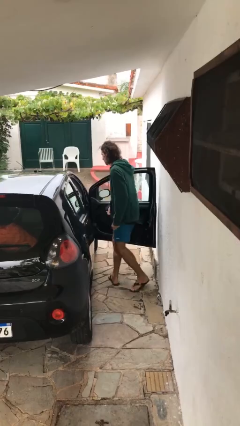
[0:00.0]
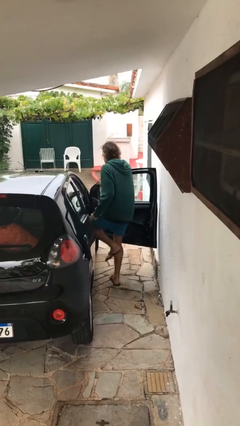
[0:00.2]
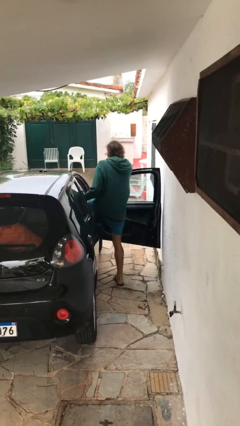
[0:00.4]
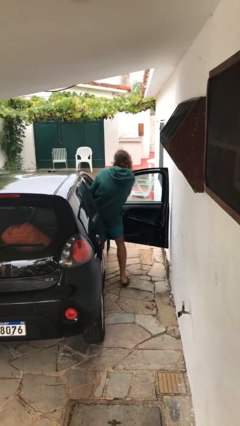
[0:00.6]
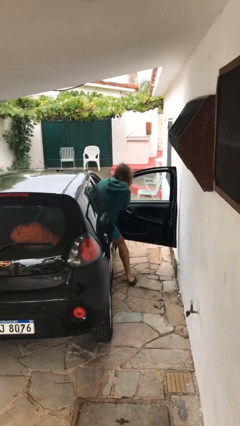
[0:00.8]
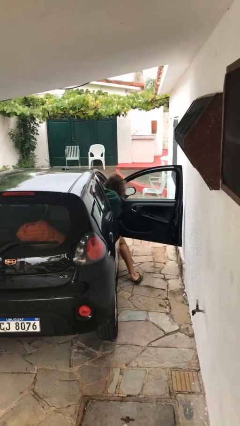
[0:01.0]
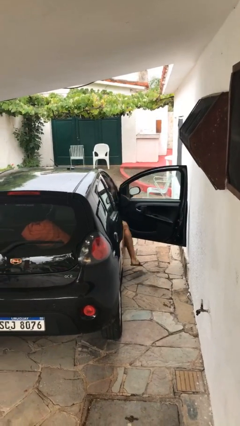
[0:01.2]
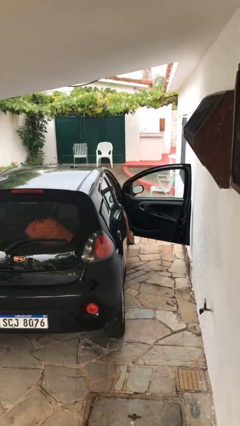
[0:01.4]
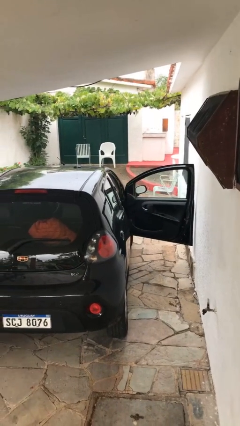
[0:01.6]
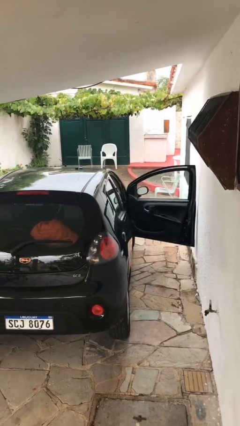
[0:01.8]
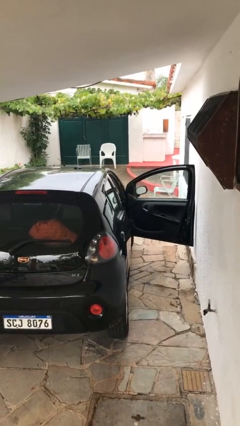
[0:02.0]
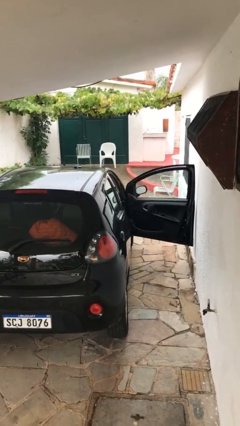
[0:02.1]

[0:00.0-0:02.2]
person enters car

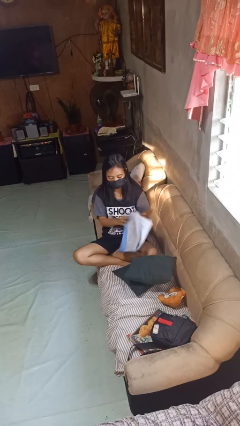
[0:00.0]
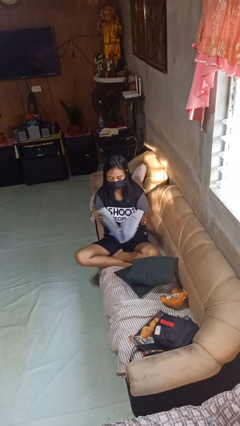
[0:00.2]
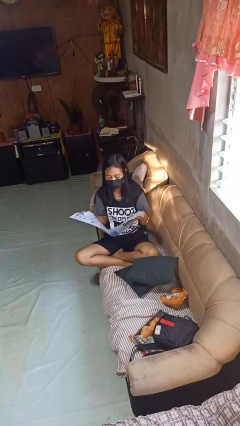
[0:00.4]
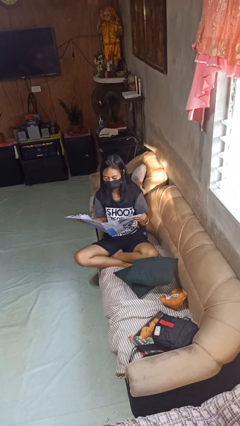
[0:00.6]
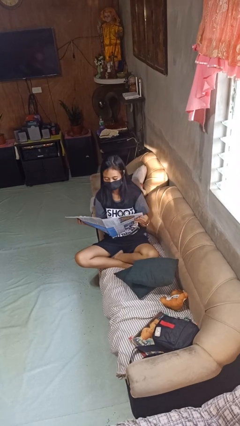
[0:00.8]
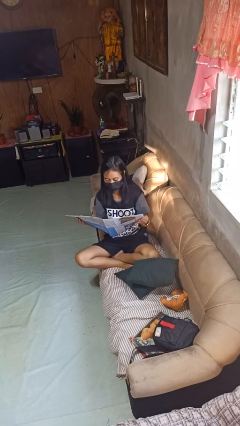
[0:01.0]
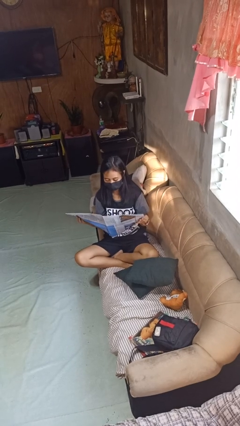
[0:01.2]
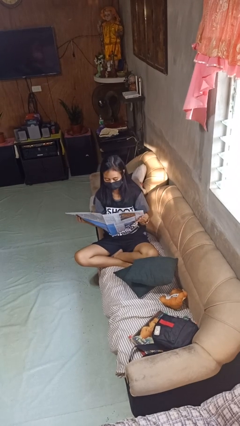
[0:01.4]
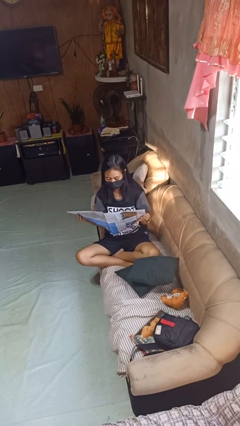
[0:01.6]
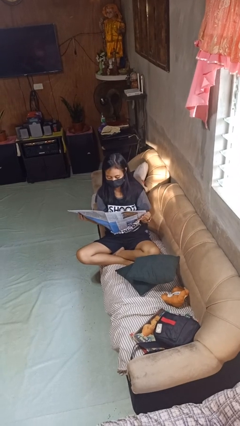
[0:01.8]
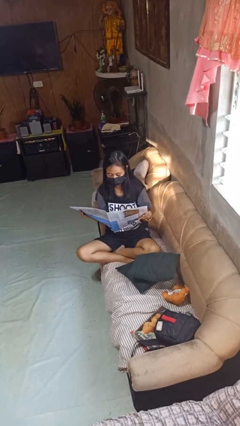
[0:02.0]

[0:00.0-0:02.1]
person reads newspaper

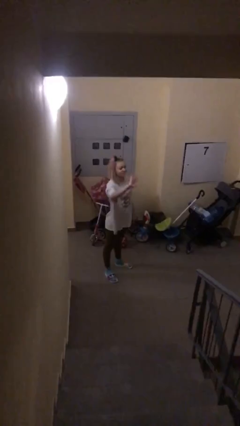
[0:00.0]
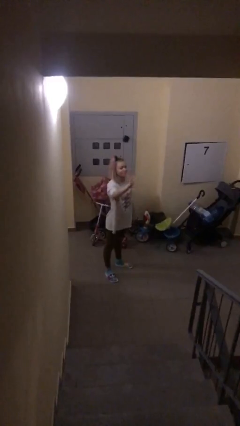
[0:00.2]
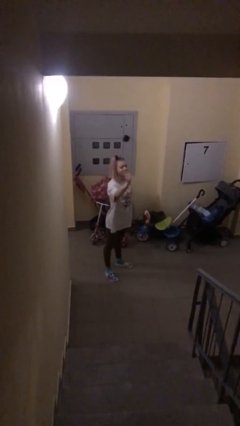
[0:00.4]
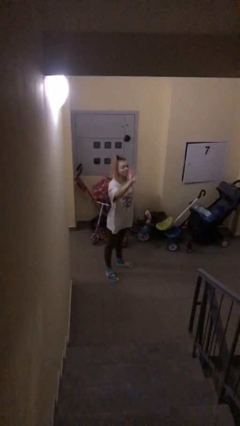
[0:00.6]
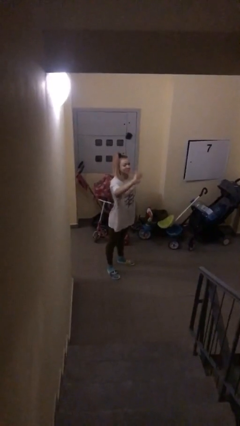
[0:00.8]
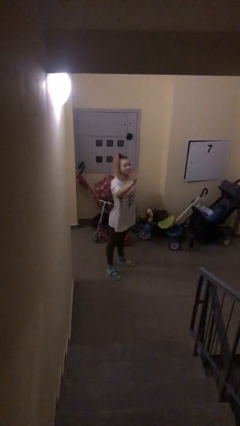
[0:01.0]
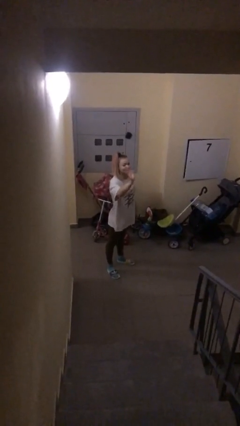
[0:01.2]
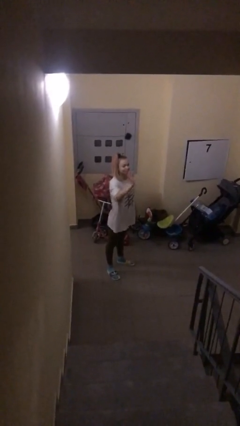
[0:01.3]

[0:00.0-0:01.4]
person waves at person

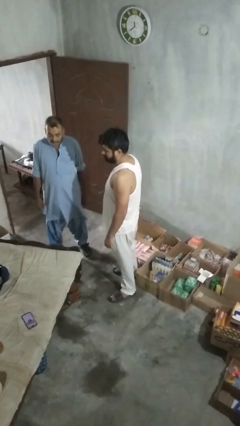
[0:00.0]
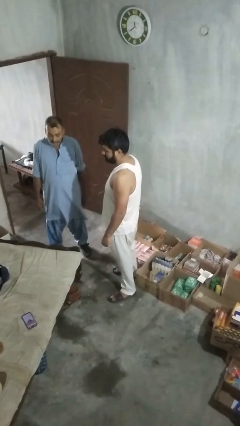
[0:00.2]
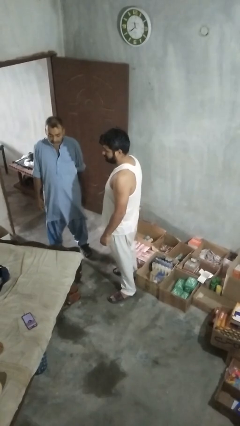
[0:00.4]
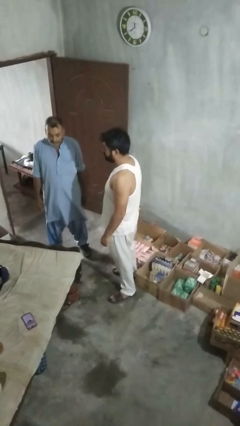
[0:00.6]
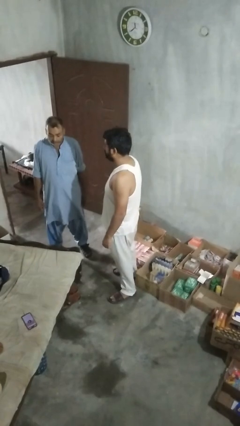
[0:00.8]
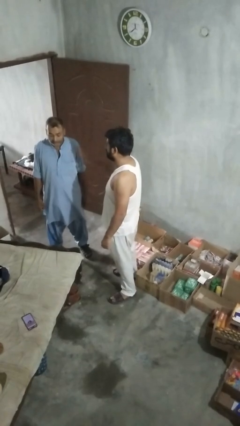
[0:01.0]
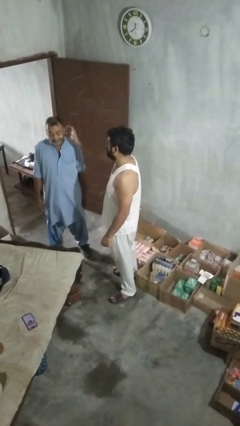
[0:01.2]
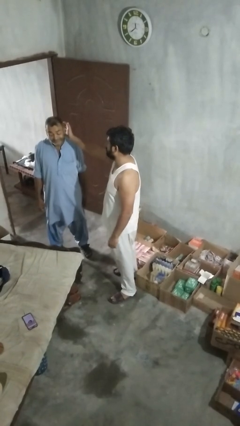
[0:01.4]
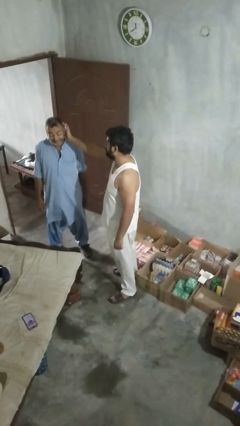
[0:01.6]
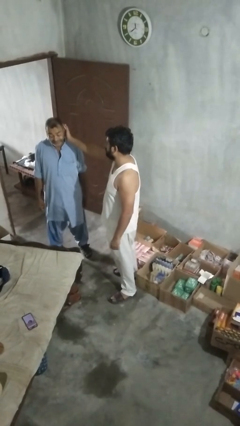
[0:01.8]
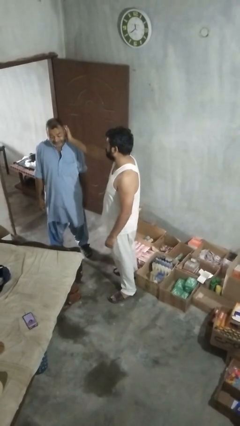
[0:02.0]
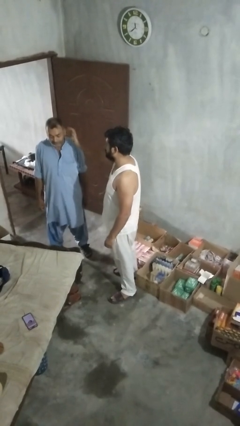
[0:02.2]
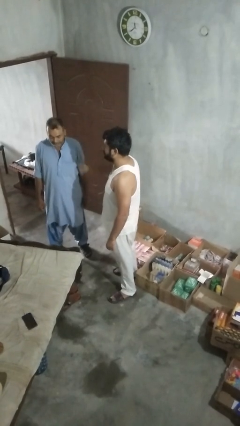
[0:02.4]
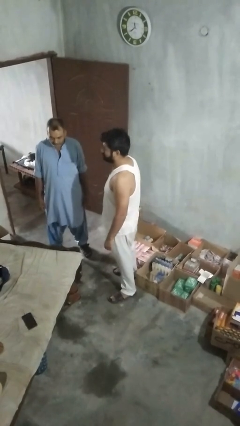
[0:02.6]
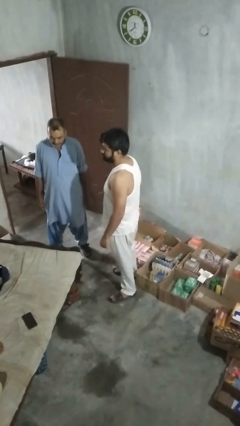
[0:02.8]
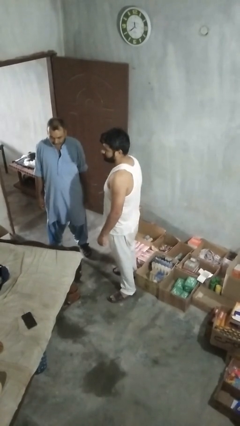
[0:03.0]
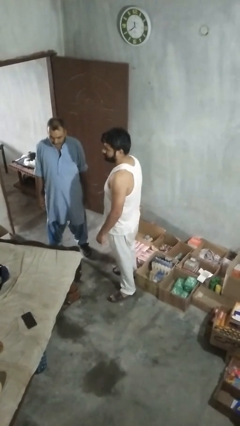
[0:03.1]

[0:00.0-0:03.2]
person touches face of person

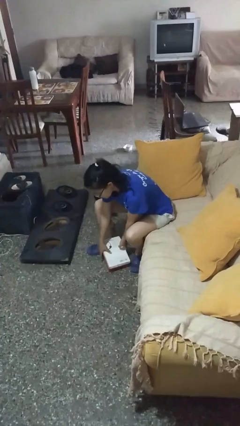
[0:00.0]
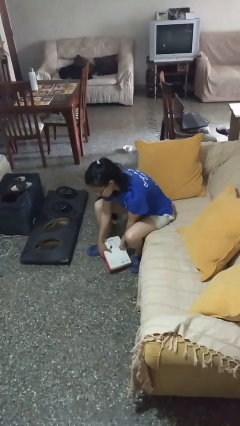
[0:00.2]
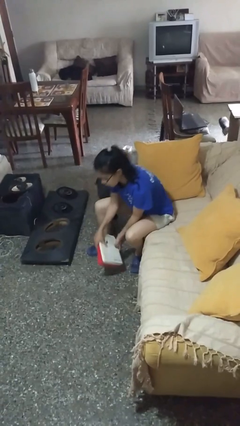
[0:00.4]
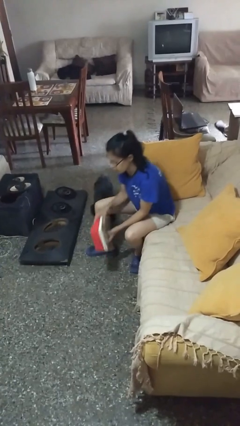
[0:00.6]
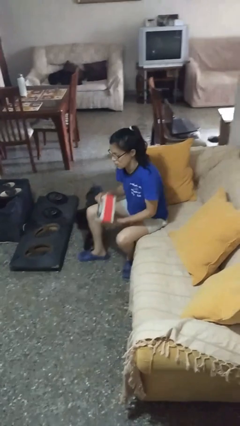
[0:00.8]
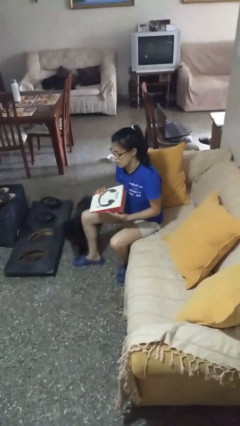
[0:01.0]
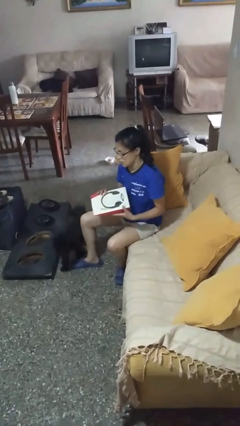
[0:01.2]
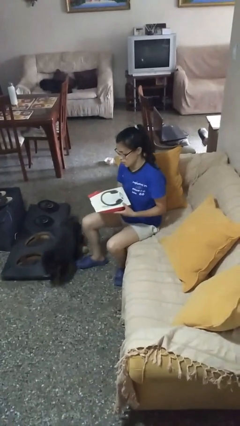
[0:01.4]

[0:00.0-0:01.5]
person picks up object from floor

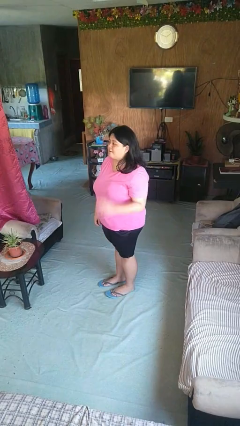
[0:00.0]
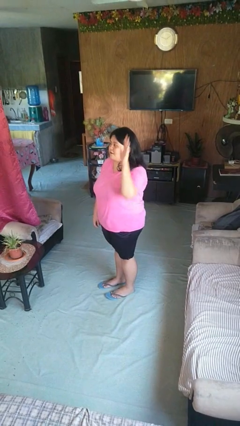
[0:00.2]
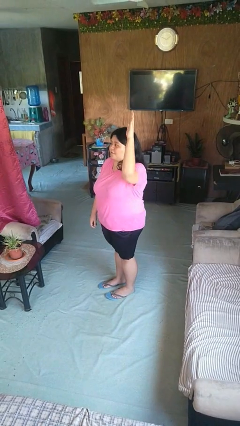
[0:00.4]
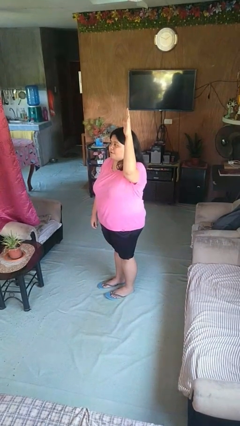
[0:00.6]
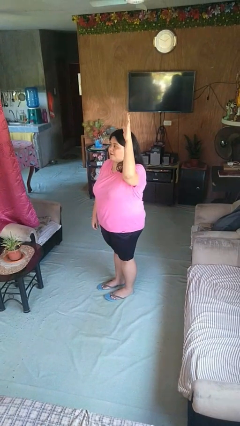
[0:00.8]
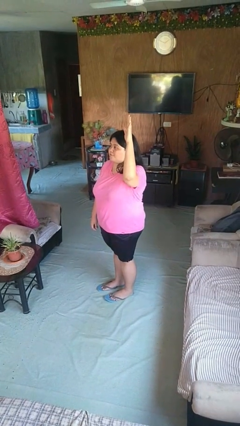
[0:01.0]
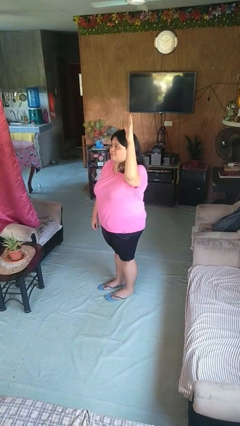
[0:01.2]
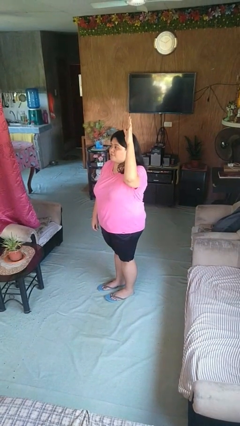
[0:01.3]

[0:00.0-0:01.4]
person gestures raise hand

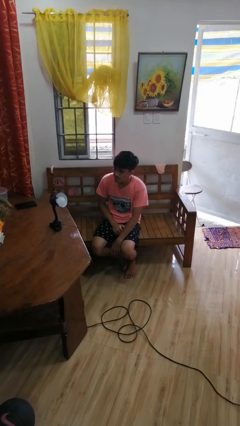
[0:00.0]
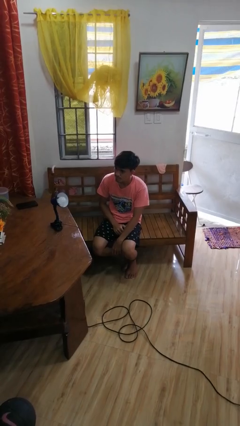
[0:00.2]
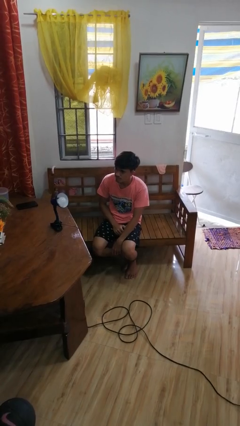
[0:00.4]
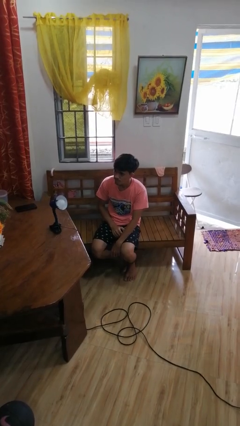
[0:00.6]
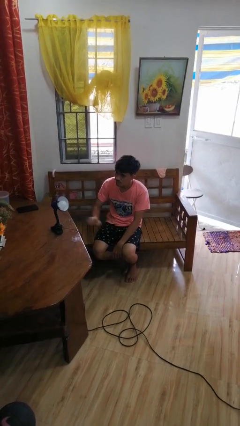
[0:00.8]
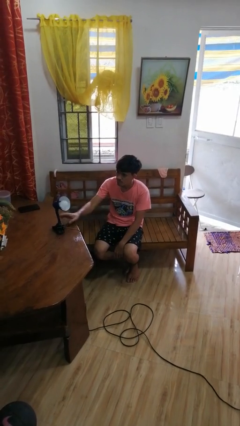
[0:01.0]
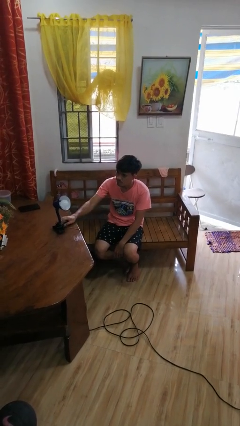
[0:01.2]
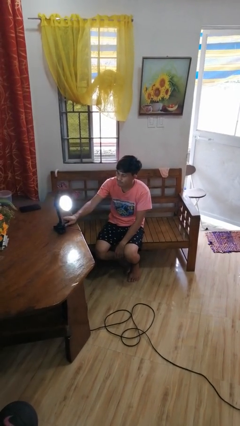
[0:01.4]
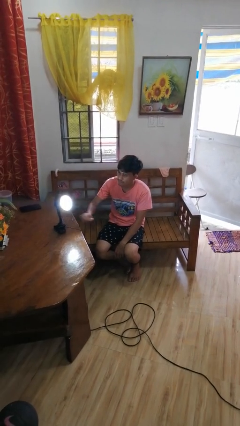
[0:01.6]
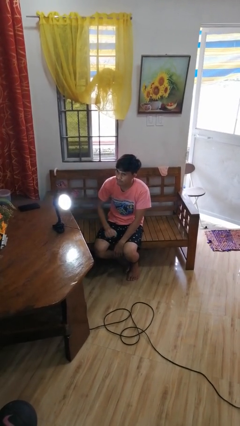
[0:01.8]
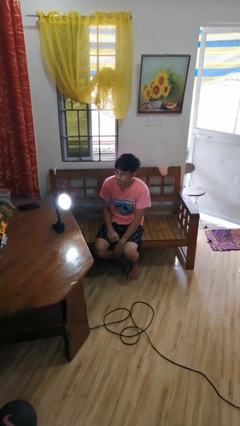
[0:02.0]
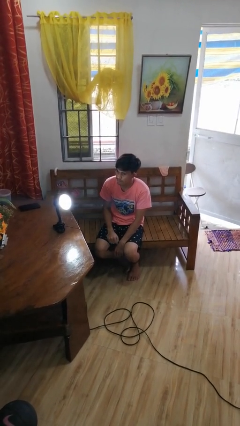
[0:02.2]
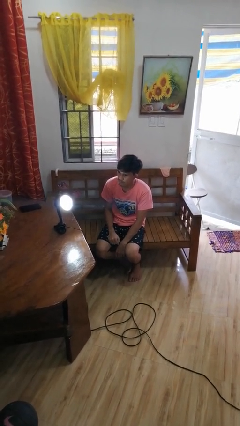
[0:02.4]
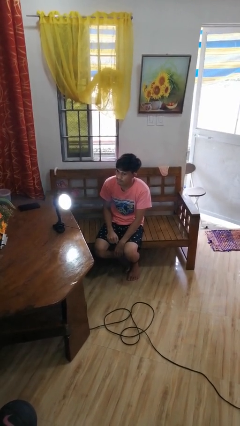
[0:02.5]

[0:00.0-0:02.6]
person turns on lamp

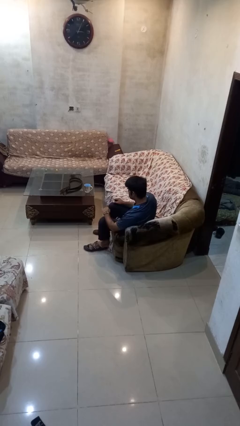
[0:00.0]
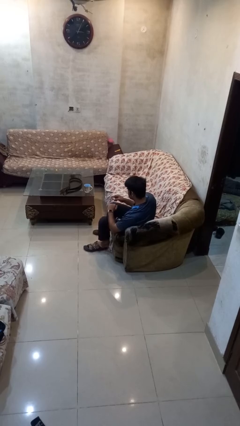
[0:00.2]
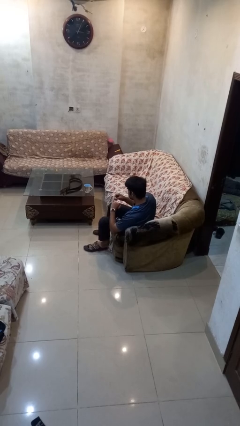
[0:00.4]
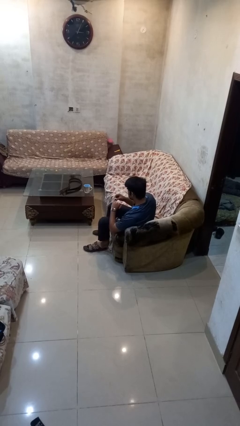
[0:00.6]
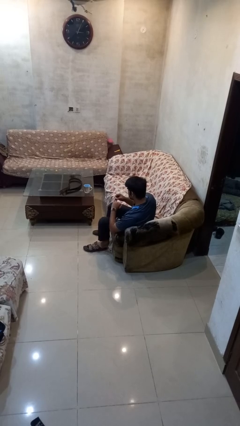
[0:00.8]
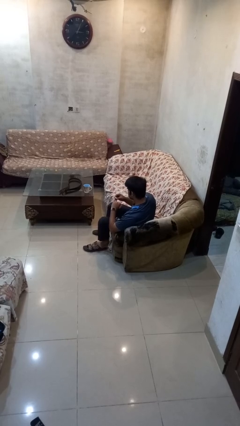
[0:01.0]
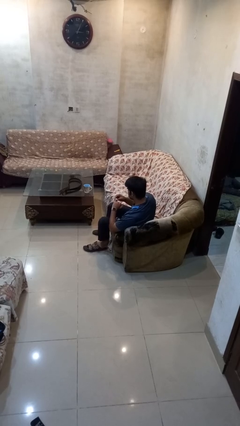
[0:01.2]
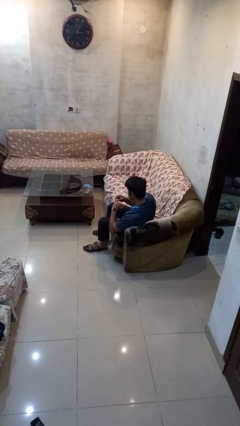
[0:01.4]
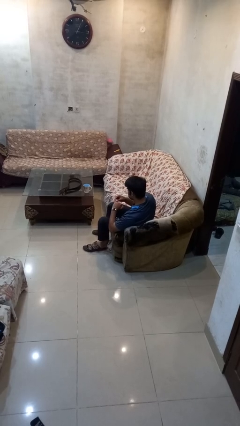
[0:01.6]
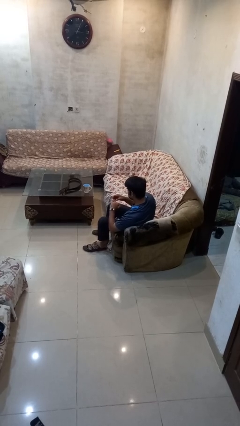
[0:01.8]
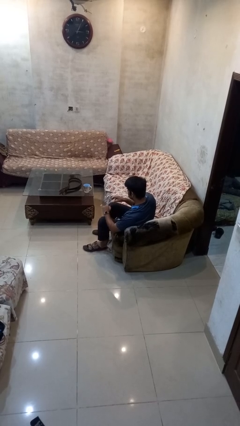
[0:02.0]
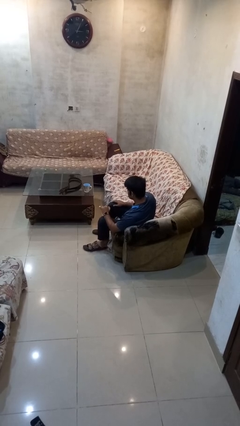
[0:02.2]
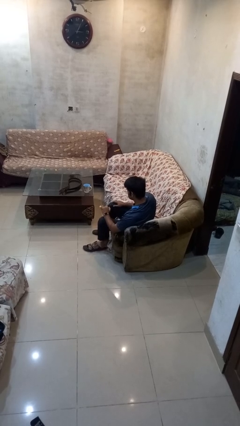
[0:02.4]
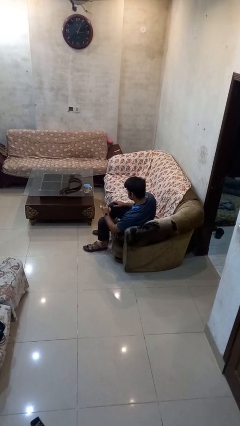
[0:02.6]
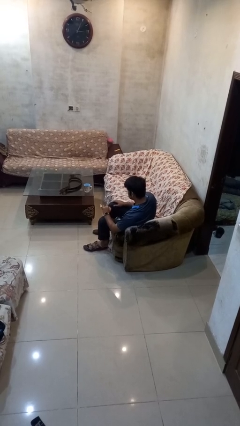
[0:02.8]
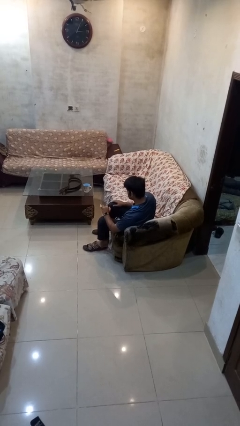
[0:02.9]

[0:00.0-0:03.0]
person puts on ring
